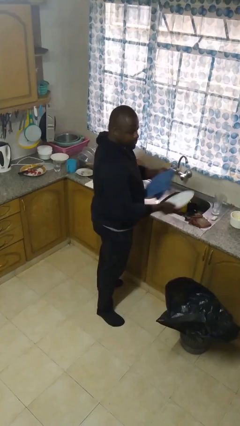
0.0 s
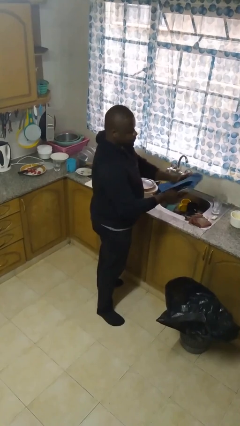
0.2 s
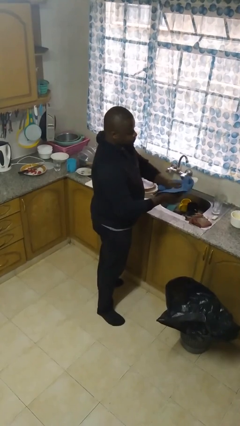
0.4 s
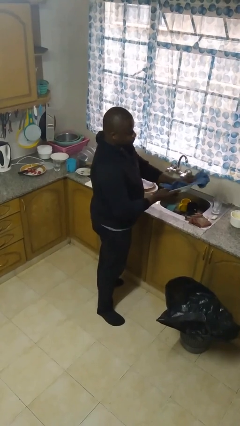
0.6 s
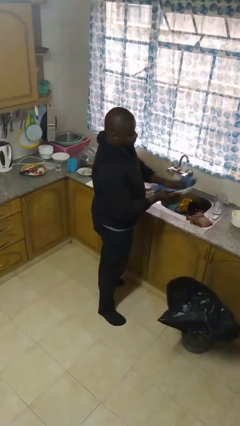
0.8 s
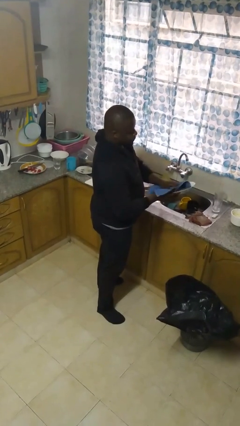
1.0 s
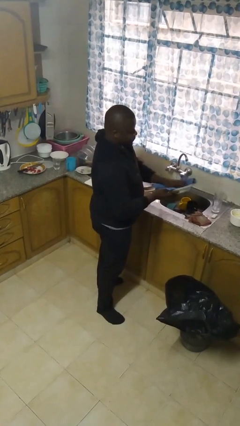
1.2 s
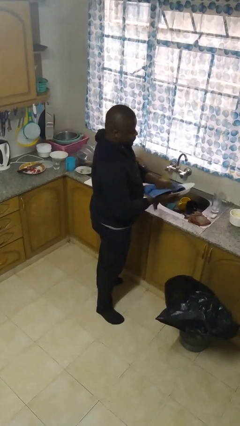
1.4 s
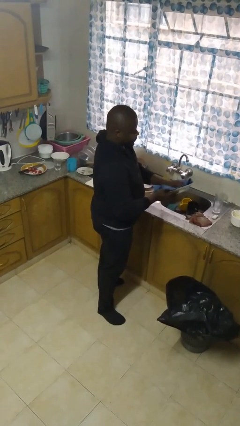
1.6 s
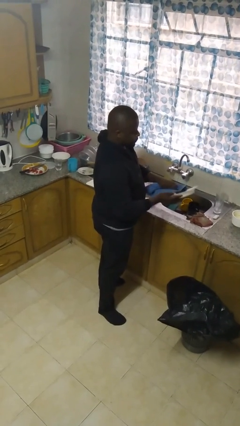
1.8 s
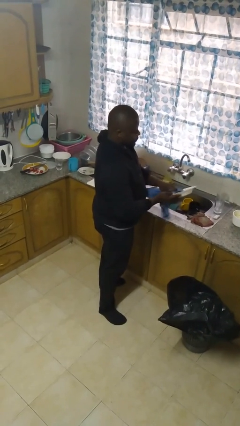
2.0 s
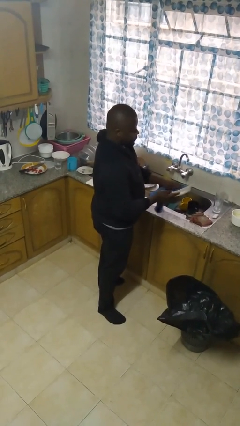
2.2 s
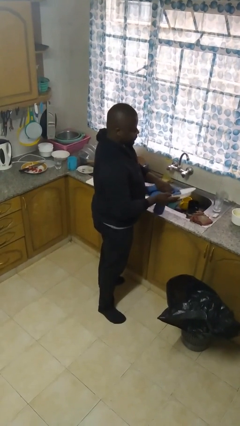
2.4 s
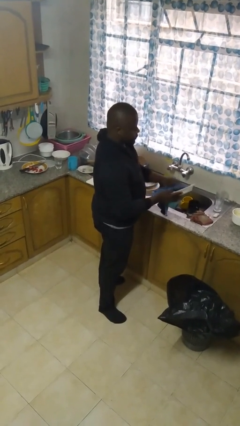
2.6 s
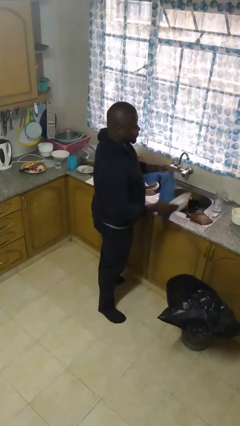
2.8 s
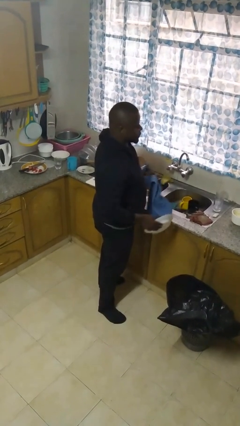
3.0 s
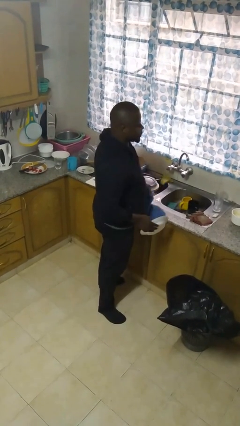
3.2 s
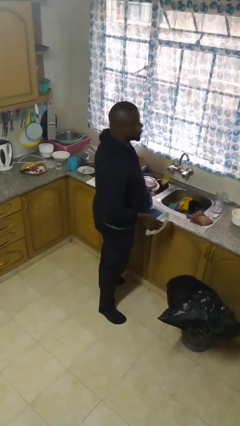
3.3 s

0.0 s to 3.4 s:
person dries dish

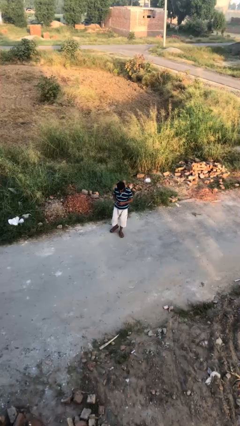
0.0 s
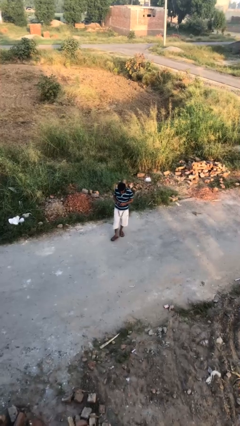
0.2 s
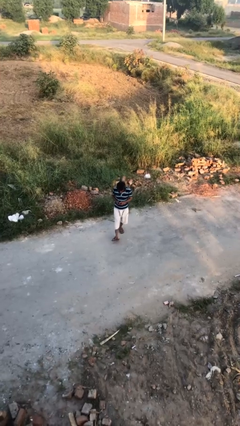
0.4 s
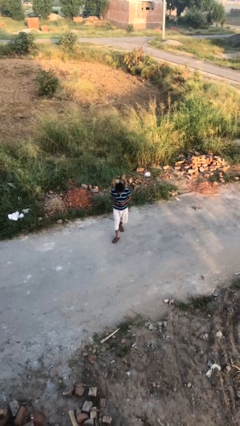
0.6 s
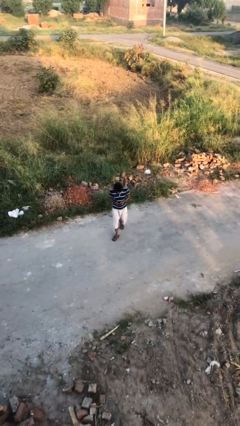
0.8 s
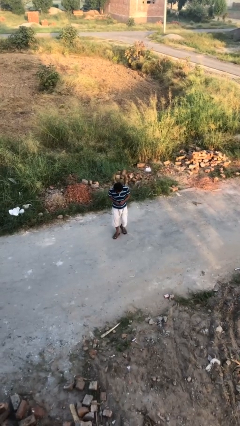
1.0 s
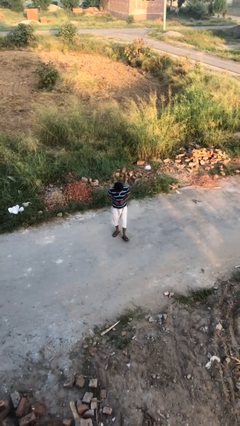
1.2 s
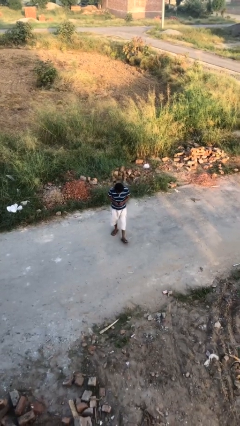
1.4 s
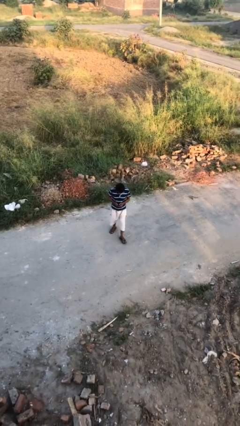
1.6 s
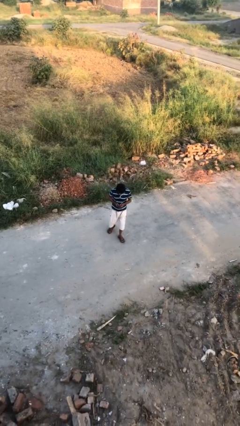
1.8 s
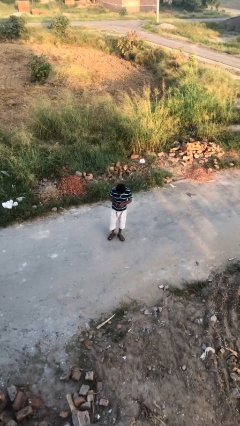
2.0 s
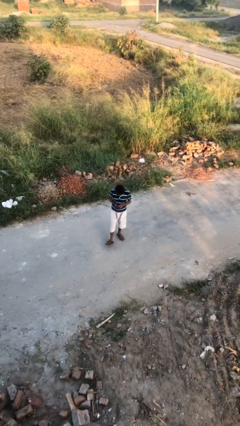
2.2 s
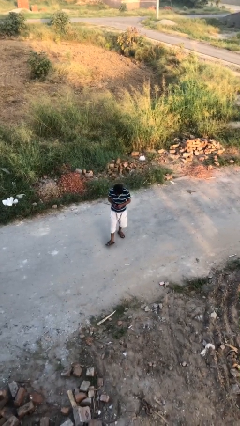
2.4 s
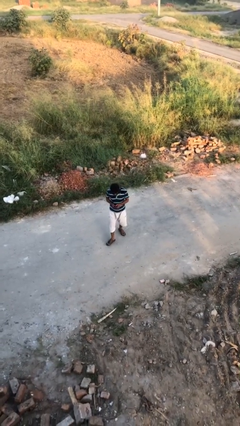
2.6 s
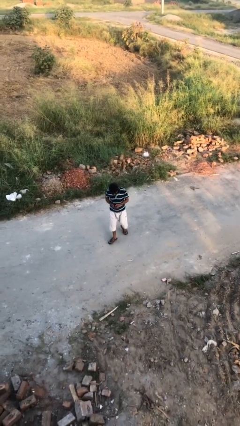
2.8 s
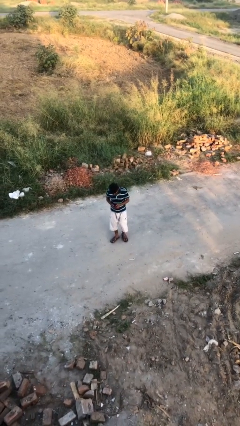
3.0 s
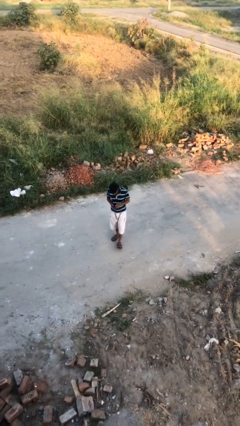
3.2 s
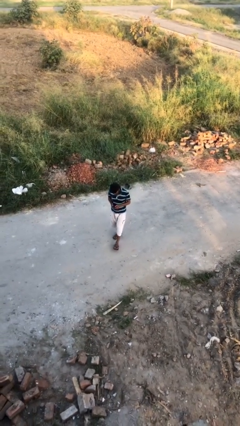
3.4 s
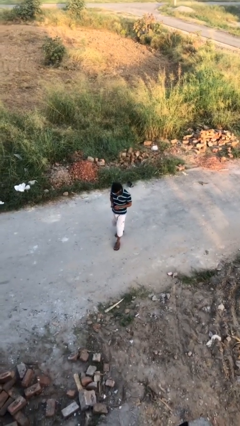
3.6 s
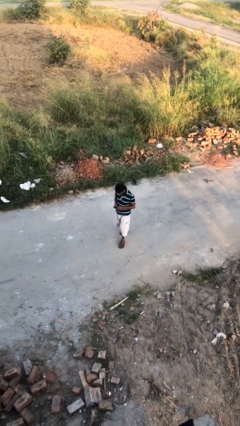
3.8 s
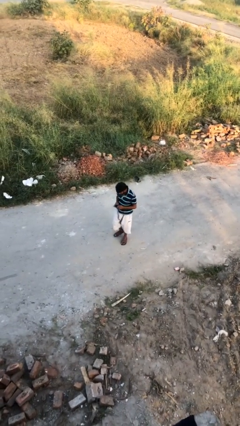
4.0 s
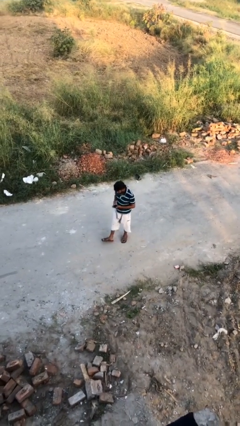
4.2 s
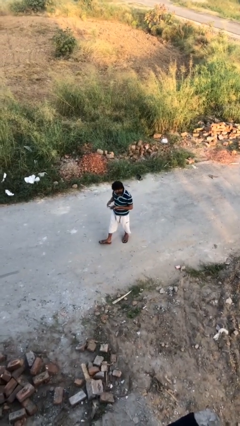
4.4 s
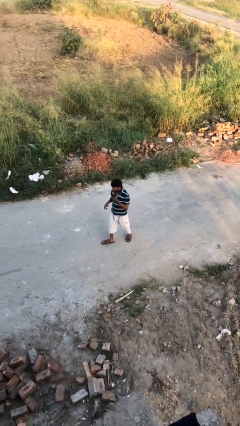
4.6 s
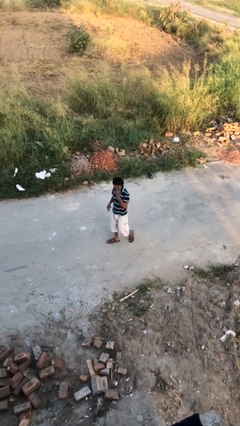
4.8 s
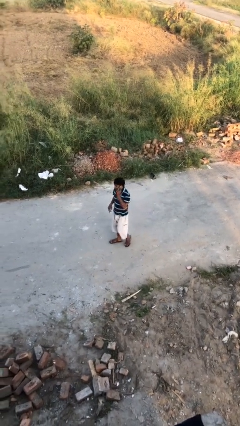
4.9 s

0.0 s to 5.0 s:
person texts on phone

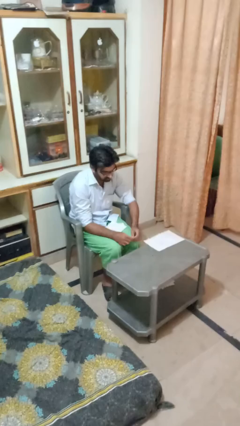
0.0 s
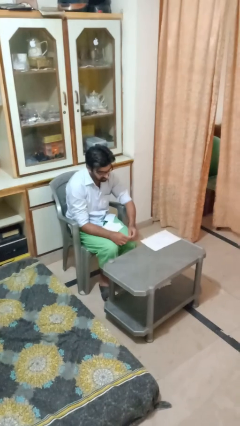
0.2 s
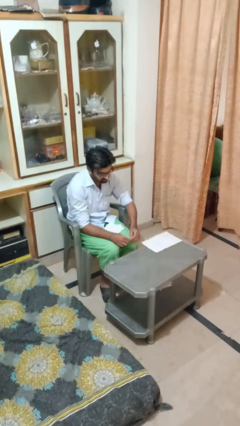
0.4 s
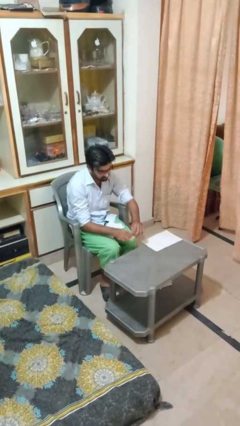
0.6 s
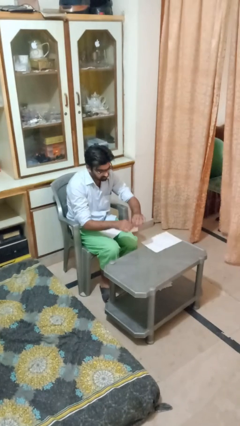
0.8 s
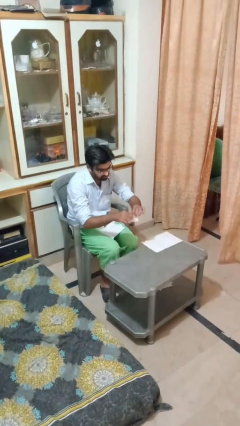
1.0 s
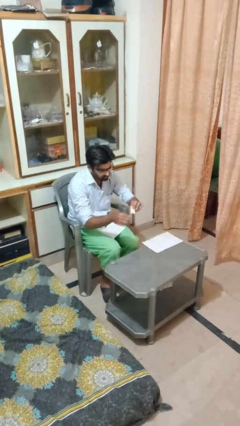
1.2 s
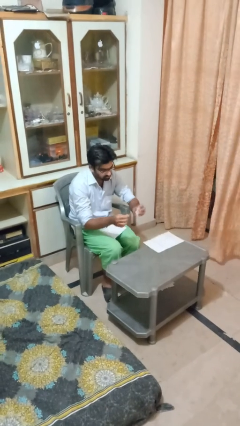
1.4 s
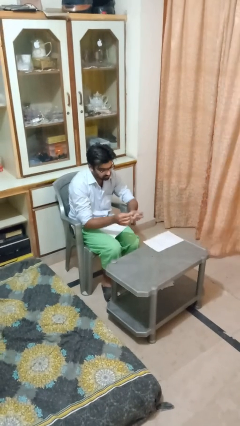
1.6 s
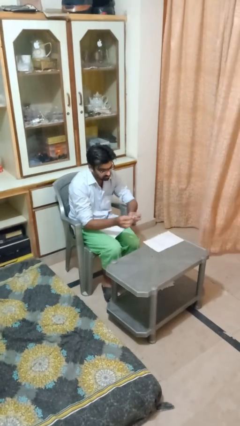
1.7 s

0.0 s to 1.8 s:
person tears paper

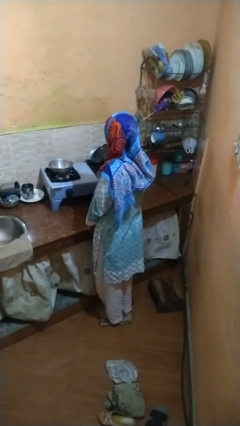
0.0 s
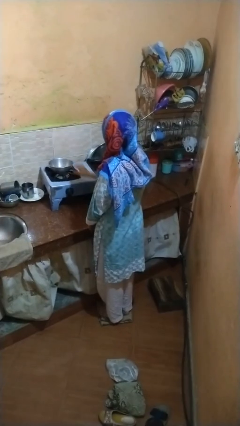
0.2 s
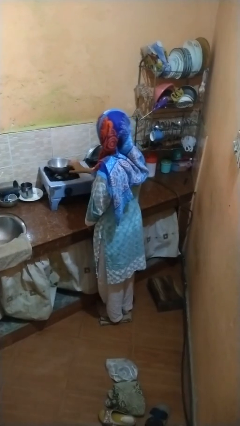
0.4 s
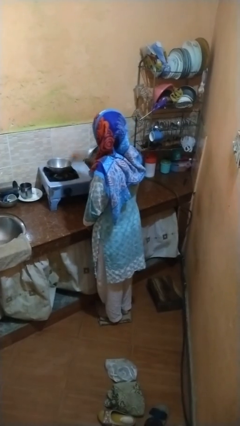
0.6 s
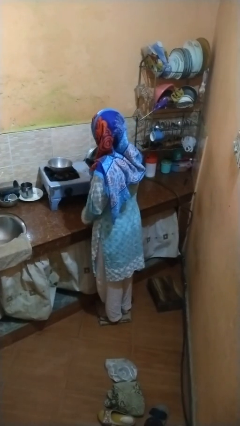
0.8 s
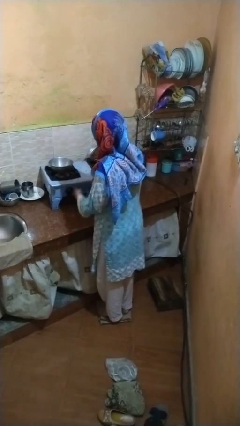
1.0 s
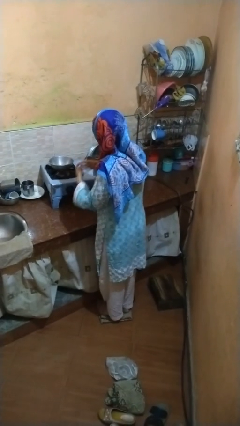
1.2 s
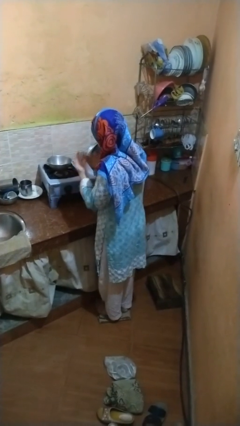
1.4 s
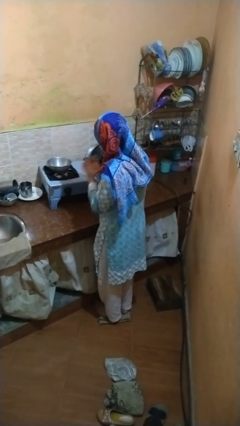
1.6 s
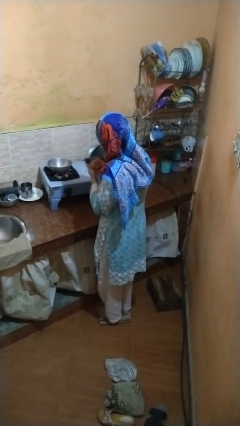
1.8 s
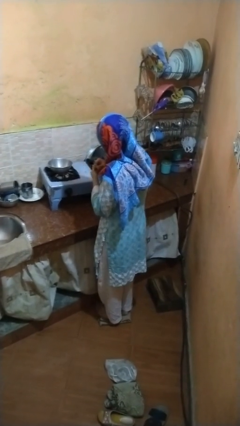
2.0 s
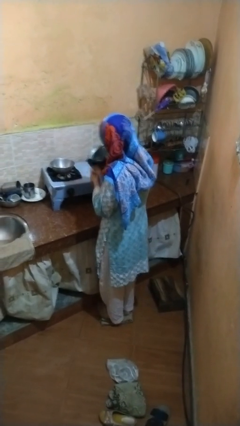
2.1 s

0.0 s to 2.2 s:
person burns hand

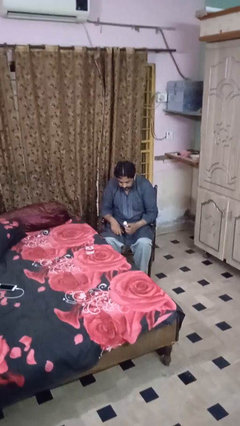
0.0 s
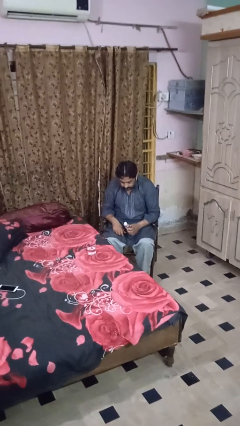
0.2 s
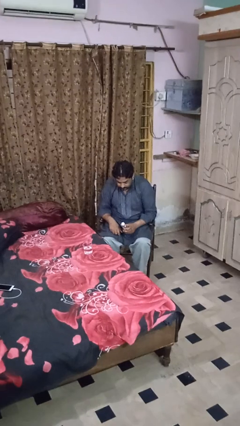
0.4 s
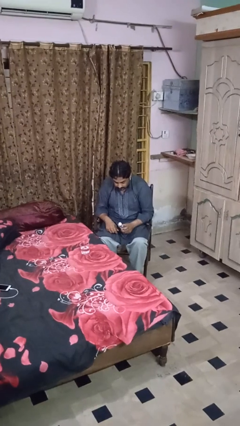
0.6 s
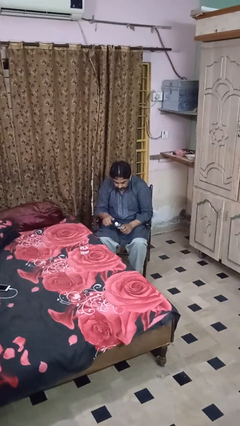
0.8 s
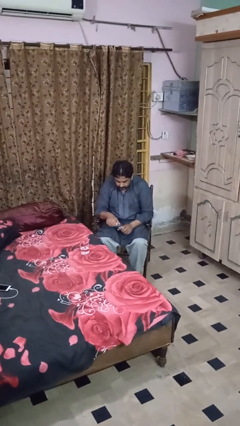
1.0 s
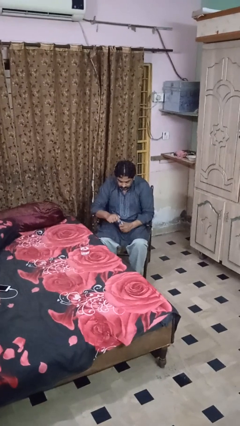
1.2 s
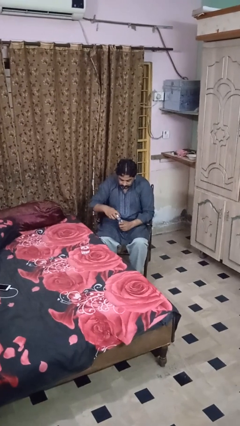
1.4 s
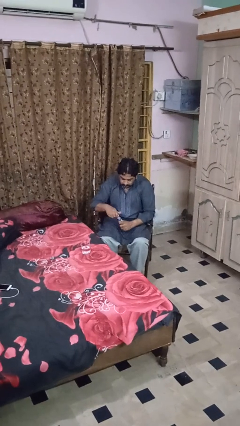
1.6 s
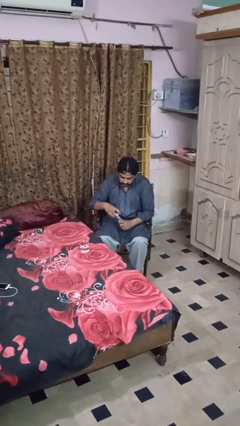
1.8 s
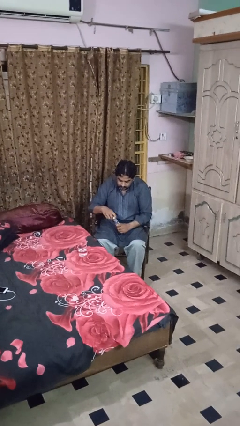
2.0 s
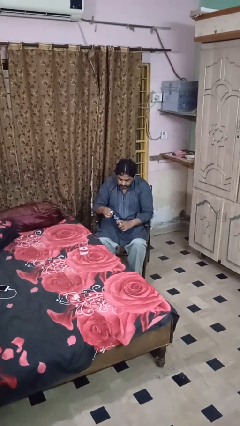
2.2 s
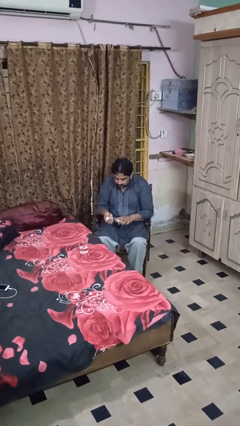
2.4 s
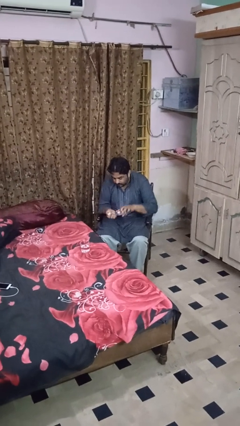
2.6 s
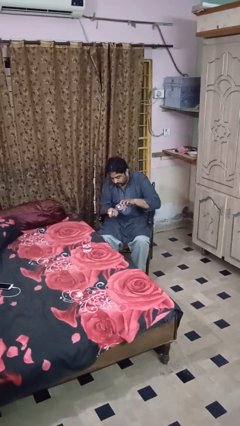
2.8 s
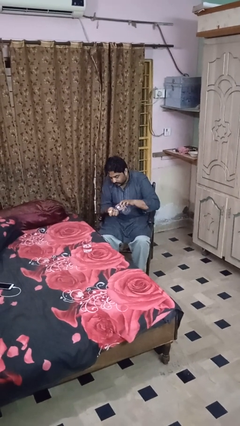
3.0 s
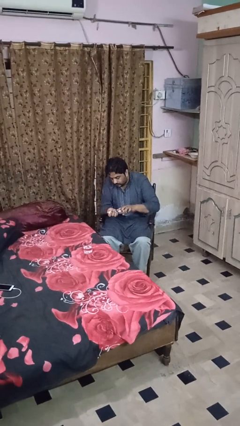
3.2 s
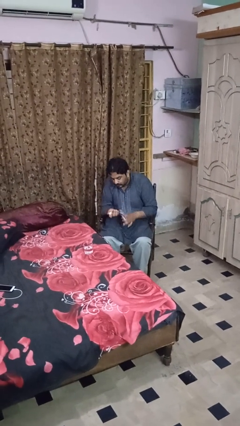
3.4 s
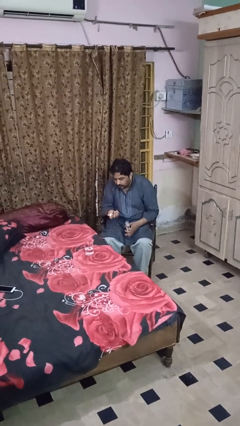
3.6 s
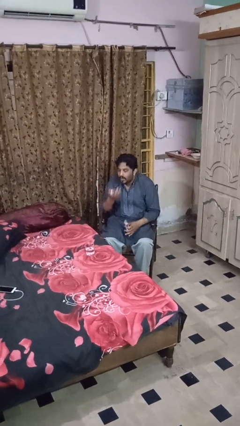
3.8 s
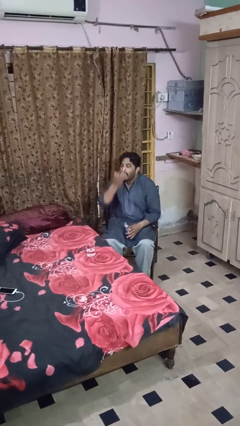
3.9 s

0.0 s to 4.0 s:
person takes medicine pills

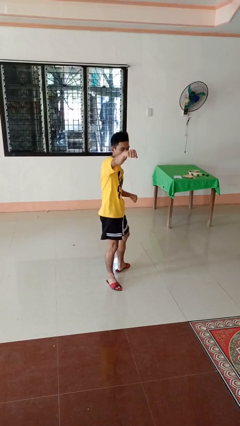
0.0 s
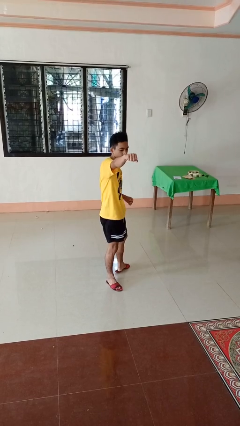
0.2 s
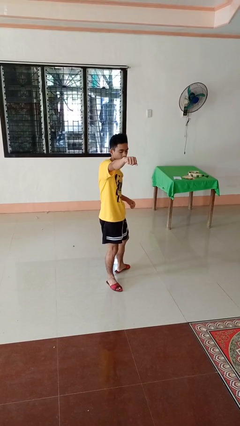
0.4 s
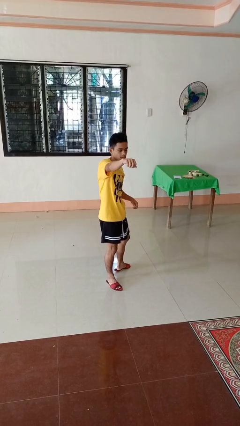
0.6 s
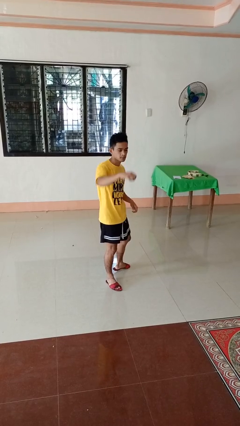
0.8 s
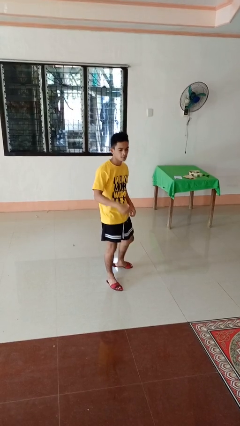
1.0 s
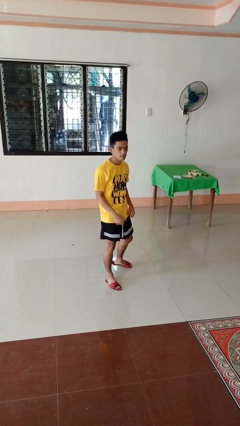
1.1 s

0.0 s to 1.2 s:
person punches
